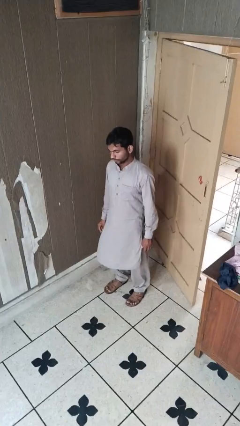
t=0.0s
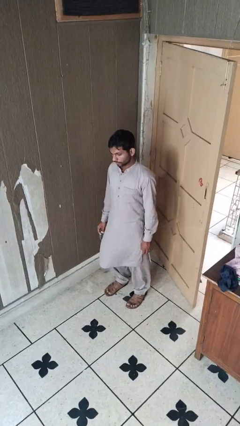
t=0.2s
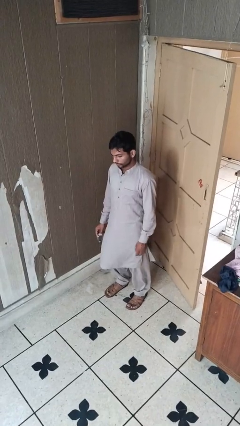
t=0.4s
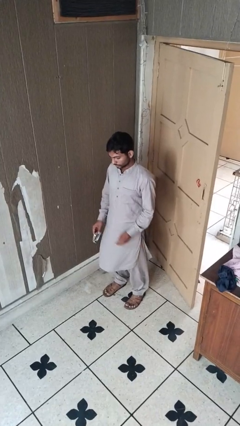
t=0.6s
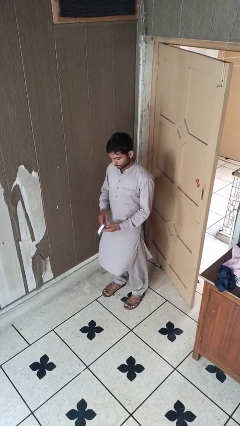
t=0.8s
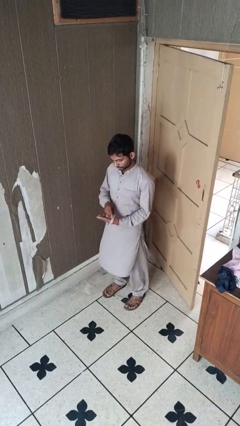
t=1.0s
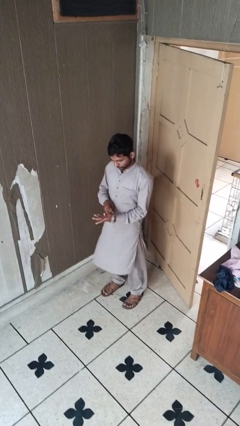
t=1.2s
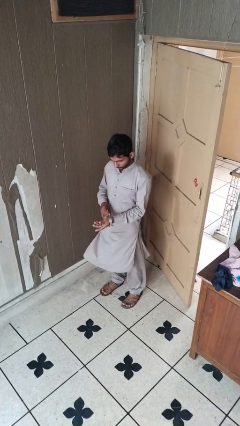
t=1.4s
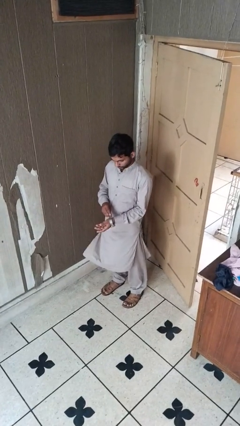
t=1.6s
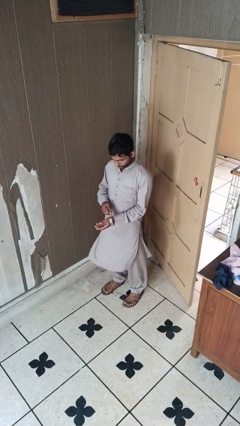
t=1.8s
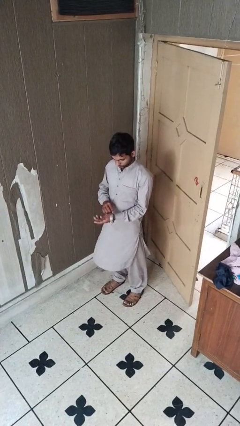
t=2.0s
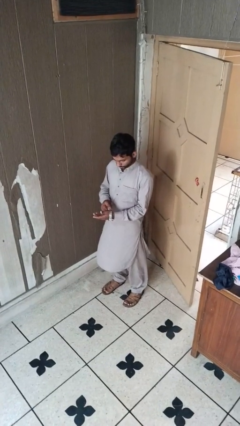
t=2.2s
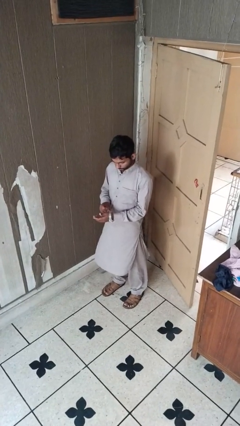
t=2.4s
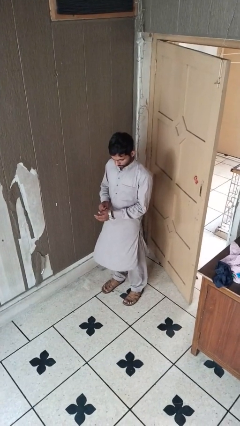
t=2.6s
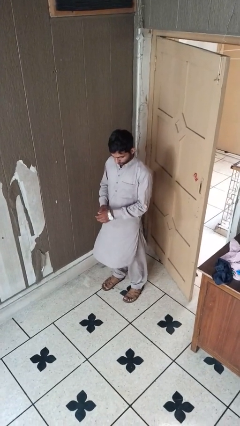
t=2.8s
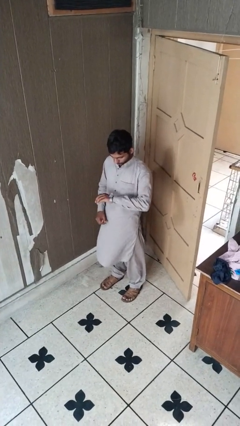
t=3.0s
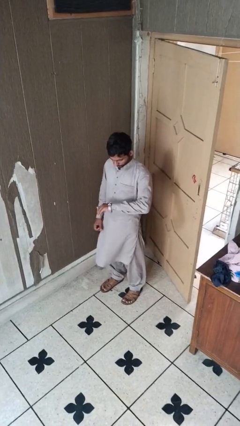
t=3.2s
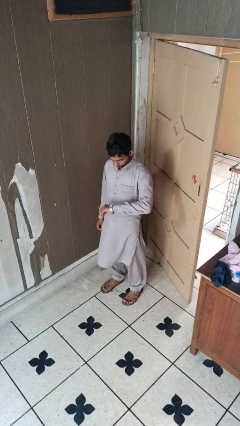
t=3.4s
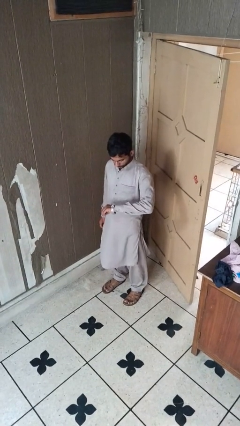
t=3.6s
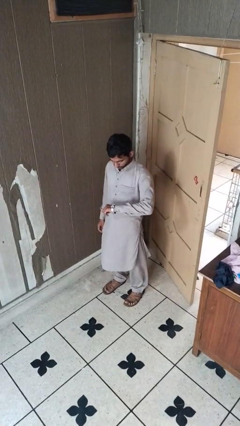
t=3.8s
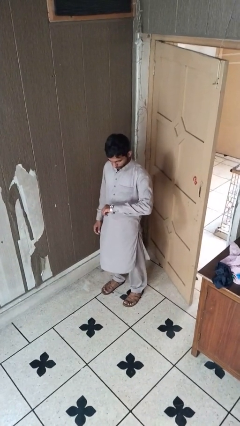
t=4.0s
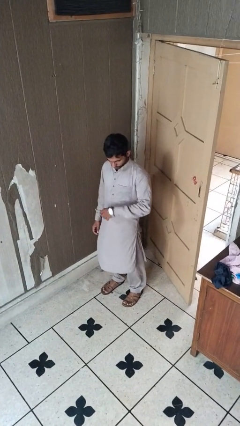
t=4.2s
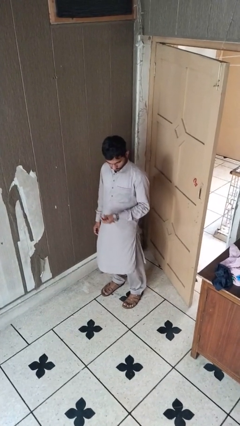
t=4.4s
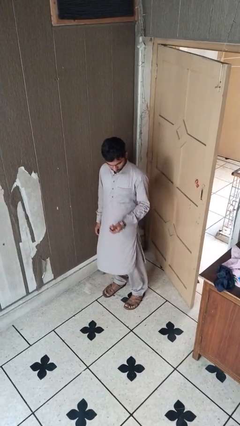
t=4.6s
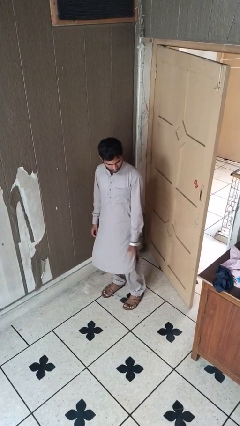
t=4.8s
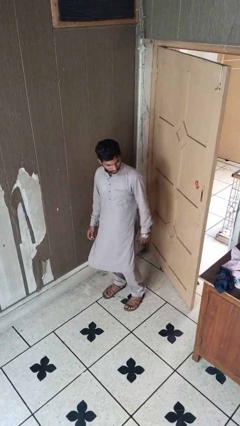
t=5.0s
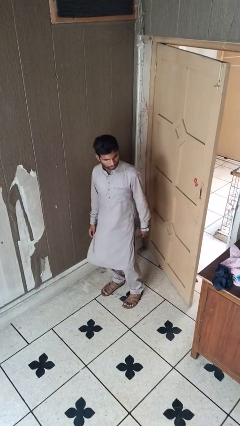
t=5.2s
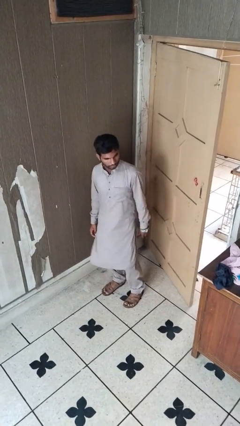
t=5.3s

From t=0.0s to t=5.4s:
person puts on wristwatch

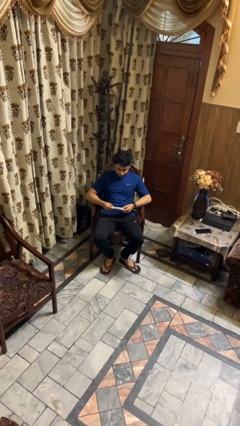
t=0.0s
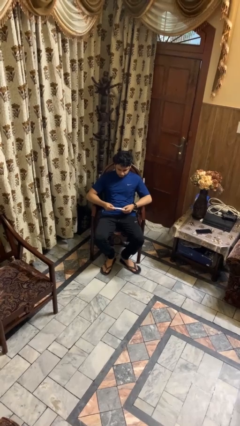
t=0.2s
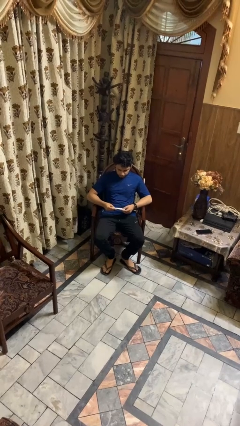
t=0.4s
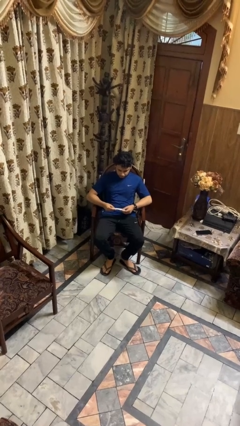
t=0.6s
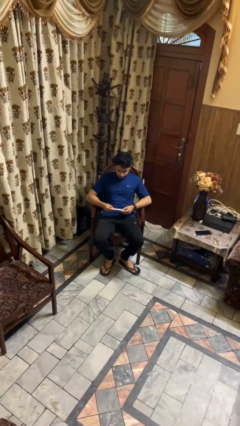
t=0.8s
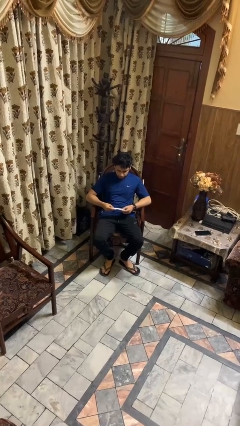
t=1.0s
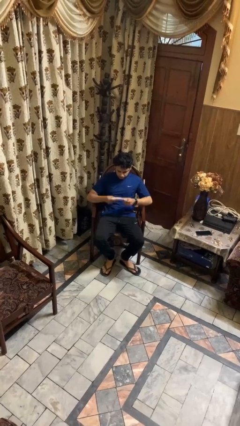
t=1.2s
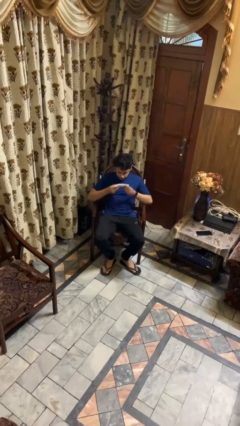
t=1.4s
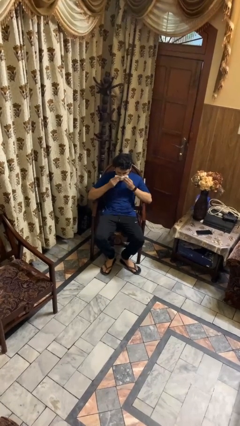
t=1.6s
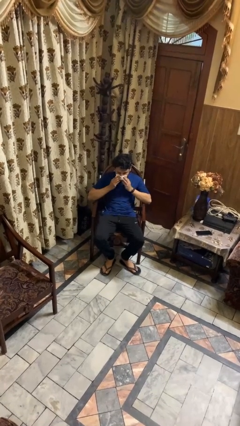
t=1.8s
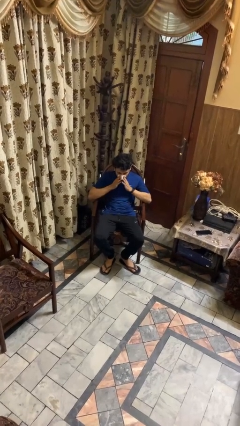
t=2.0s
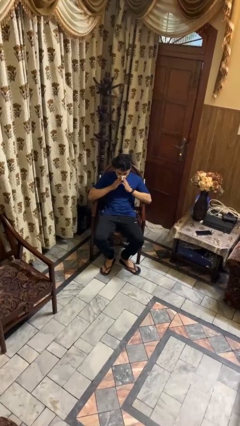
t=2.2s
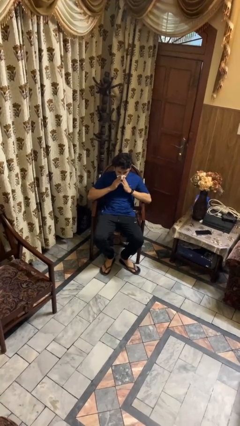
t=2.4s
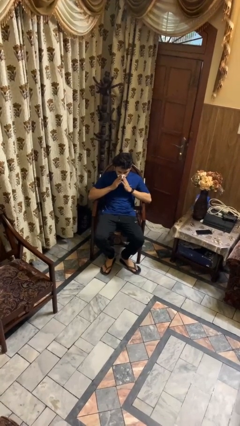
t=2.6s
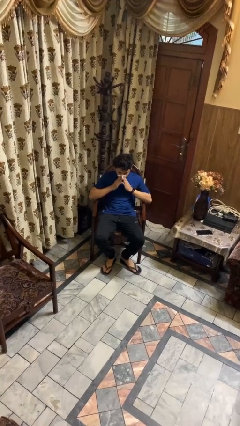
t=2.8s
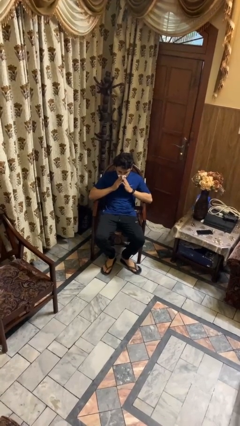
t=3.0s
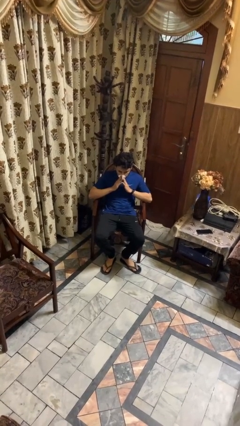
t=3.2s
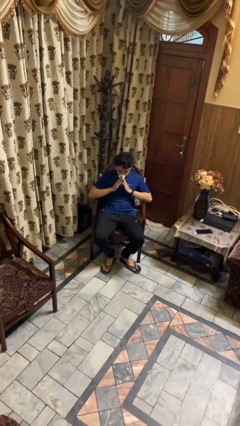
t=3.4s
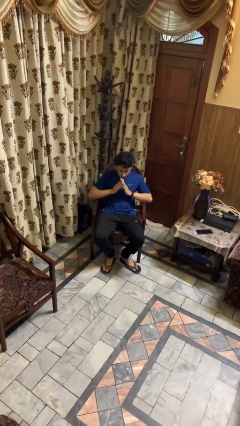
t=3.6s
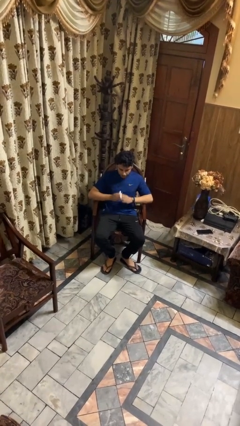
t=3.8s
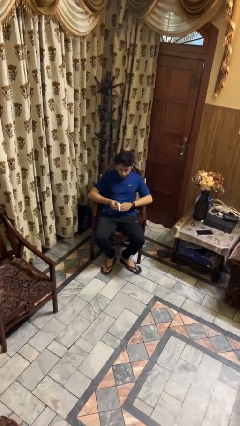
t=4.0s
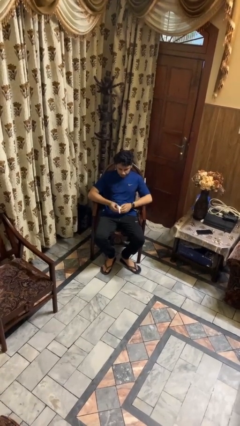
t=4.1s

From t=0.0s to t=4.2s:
person blows nose

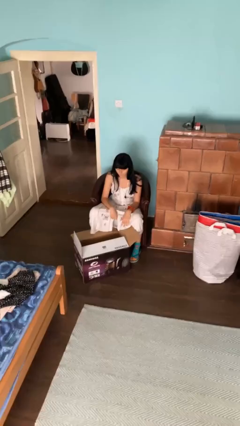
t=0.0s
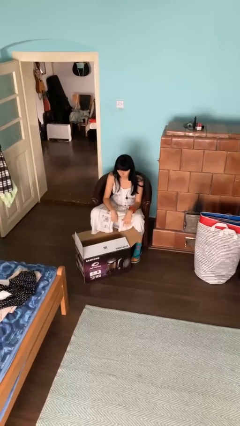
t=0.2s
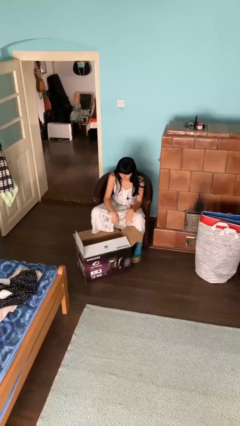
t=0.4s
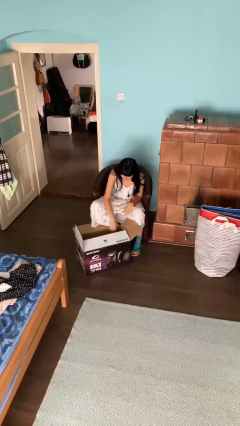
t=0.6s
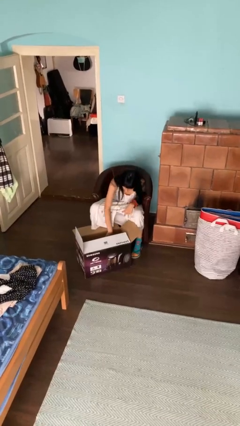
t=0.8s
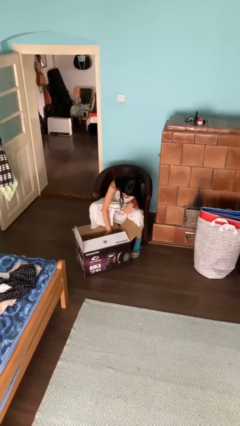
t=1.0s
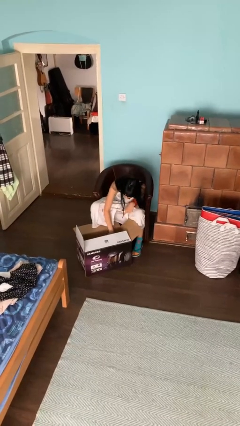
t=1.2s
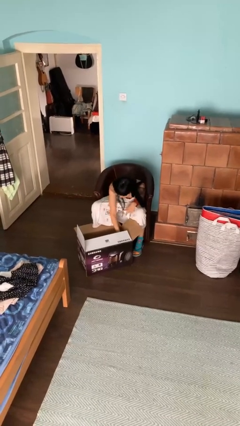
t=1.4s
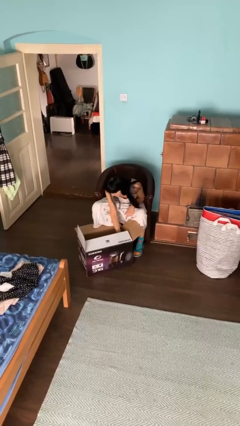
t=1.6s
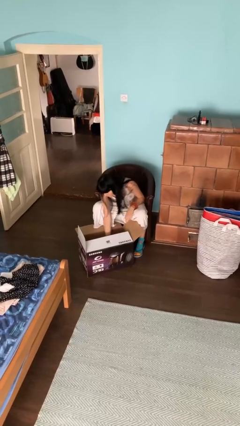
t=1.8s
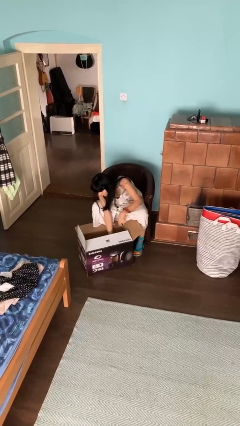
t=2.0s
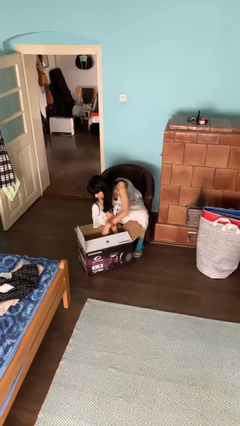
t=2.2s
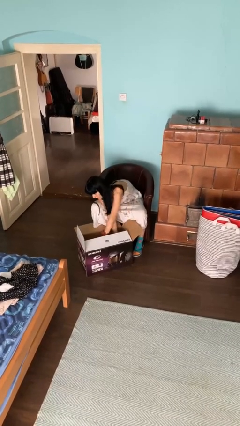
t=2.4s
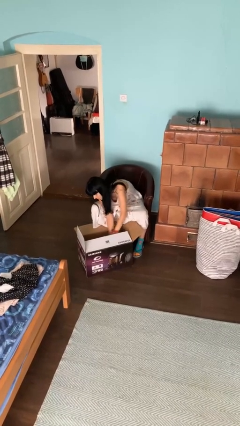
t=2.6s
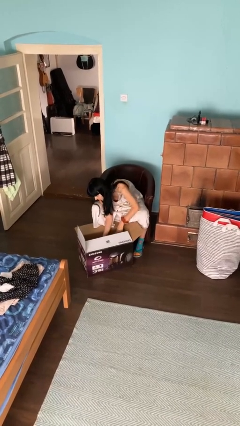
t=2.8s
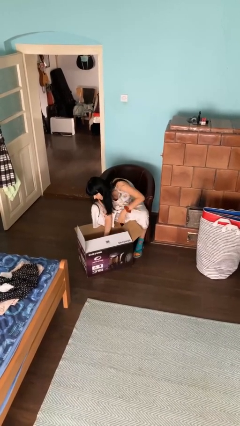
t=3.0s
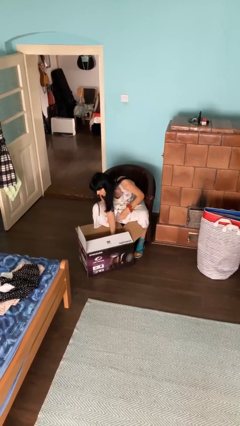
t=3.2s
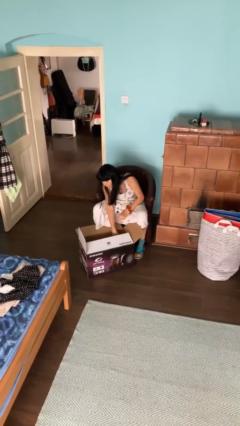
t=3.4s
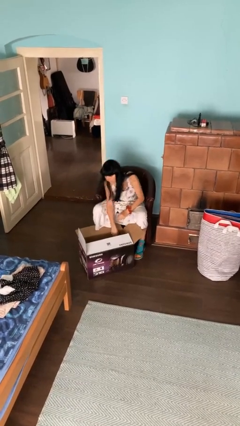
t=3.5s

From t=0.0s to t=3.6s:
person searches in box

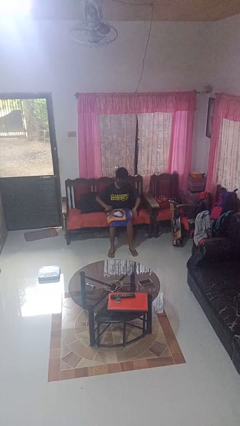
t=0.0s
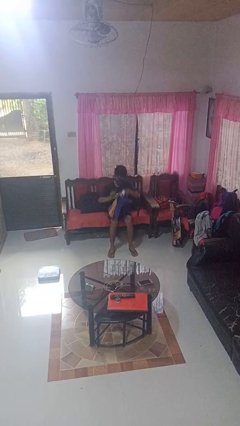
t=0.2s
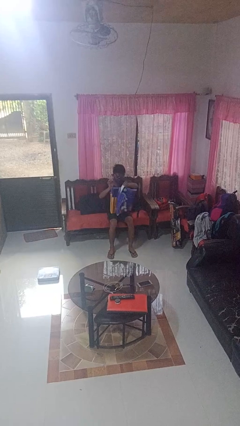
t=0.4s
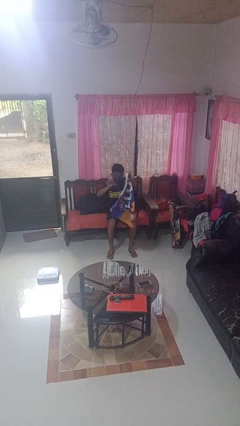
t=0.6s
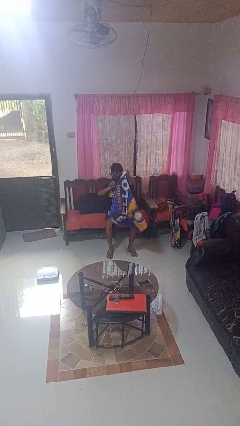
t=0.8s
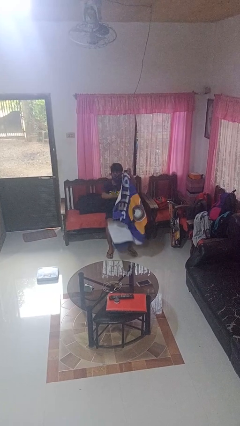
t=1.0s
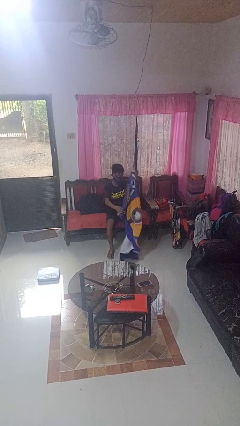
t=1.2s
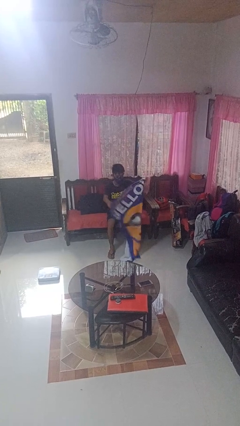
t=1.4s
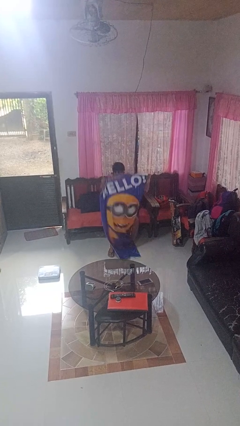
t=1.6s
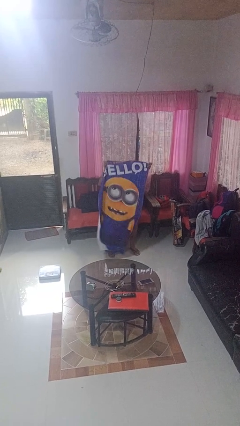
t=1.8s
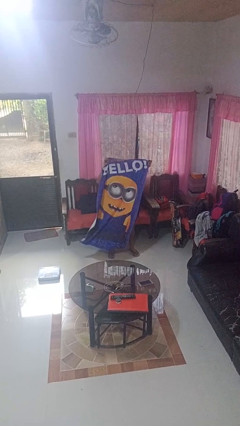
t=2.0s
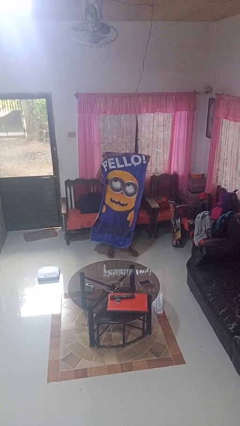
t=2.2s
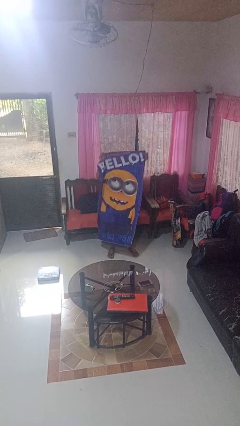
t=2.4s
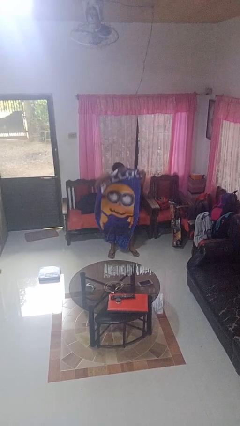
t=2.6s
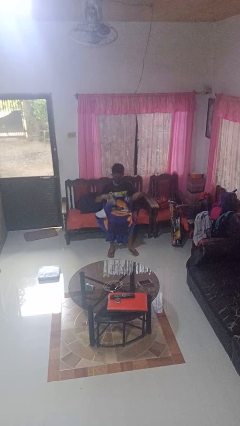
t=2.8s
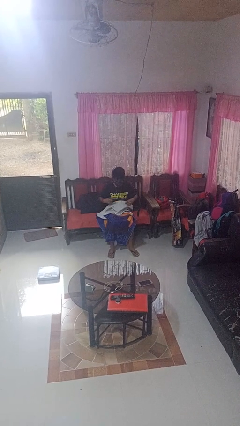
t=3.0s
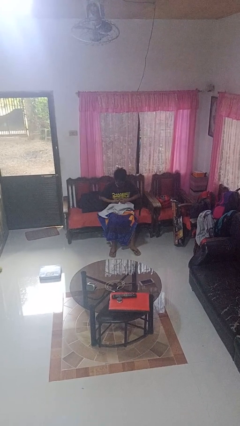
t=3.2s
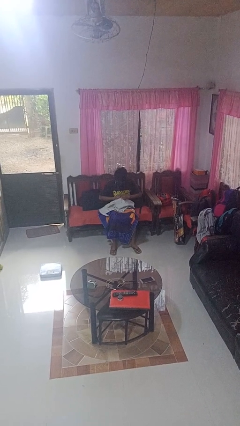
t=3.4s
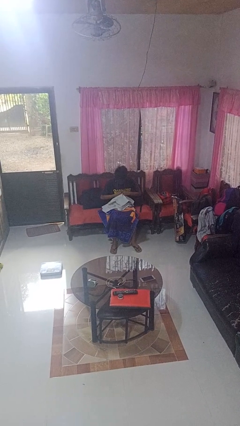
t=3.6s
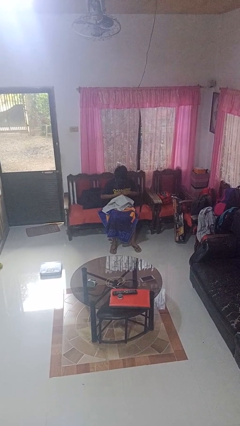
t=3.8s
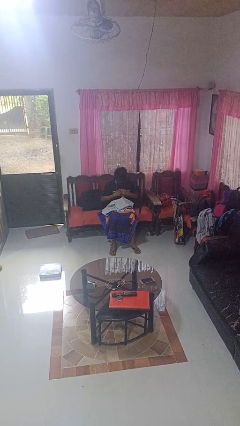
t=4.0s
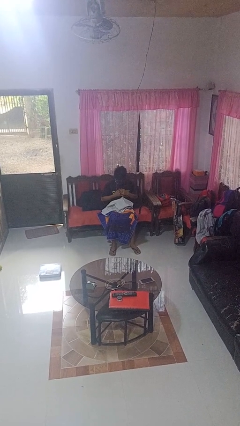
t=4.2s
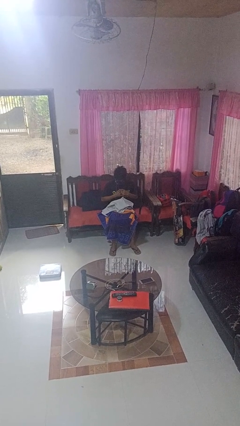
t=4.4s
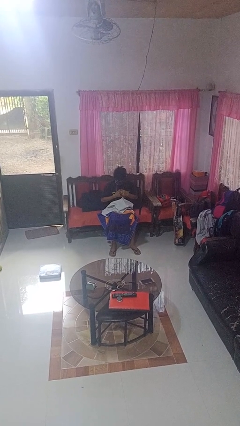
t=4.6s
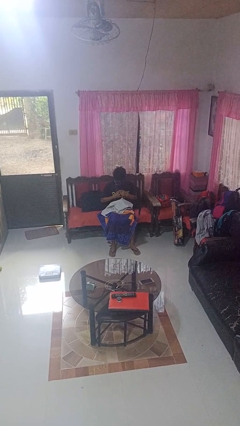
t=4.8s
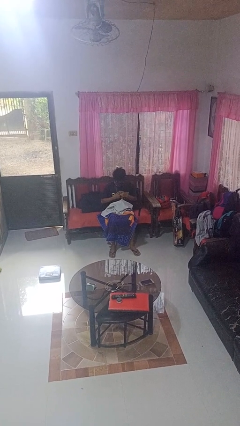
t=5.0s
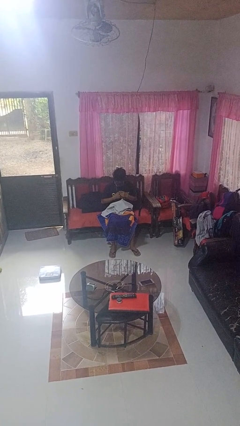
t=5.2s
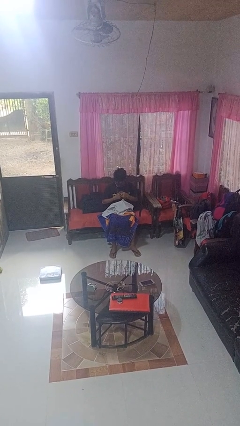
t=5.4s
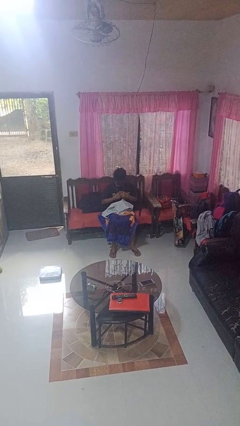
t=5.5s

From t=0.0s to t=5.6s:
person folds towel
